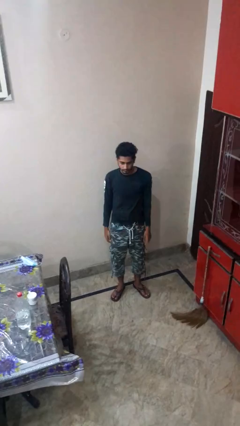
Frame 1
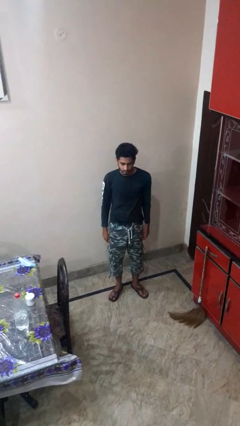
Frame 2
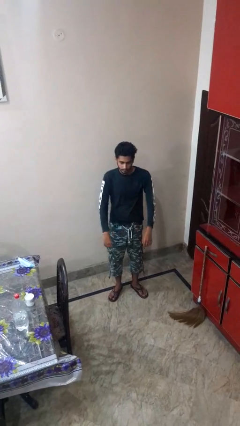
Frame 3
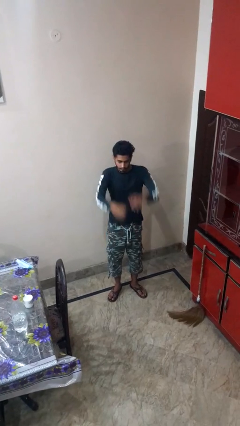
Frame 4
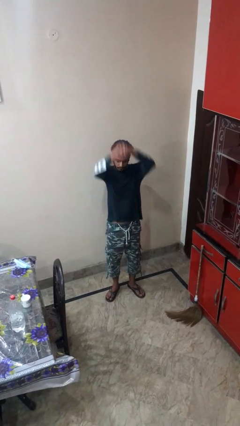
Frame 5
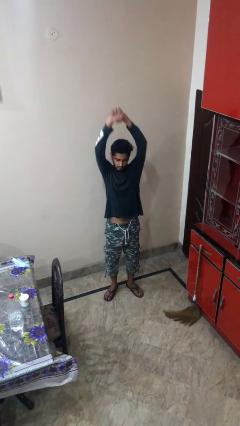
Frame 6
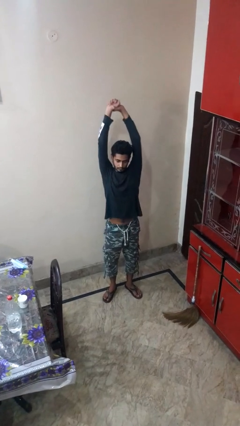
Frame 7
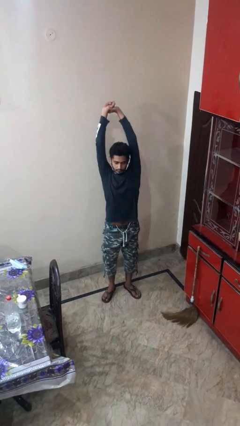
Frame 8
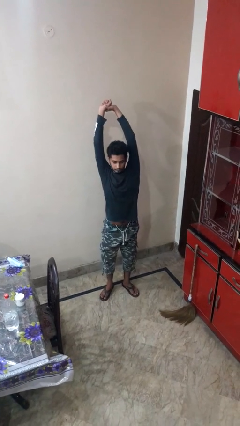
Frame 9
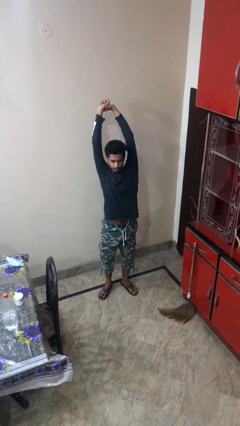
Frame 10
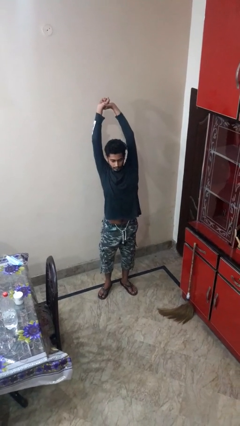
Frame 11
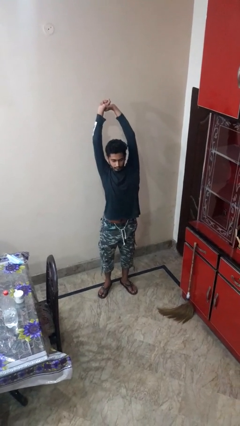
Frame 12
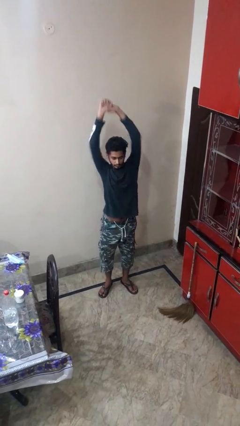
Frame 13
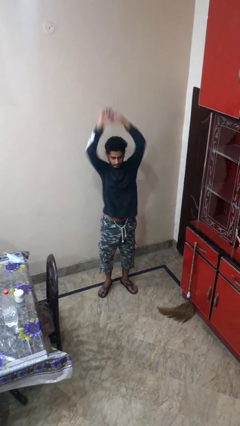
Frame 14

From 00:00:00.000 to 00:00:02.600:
person stretches arms over head

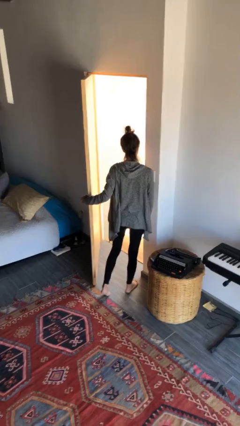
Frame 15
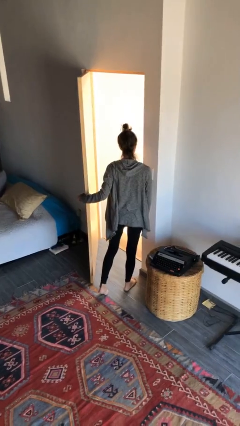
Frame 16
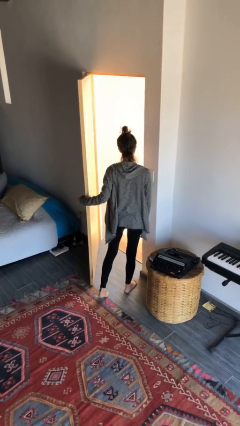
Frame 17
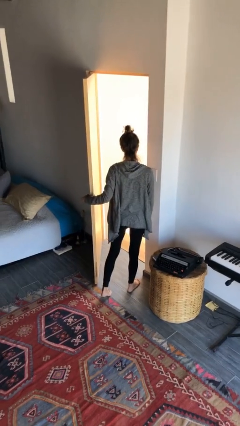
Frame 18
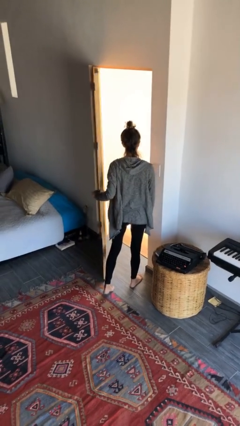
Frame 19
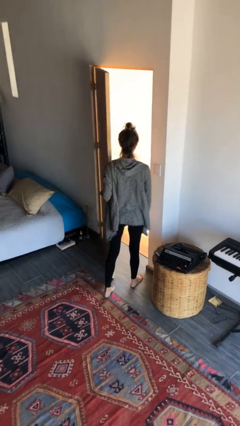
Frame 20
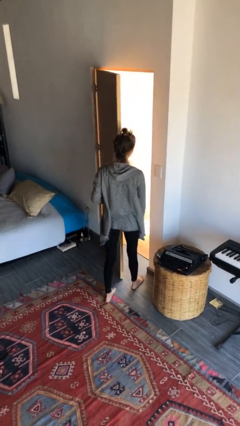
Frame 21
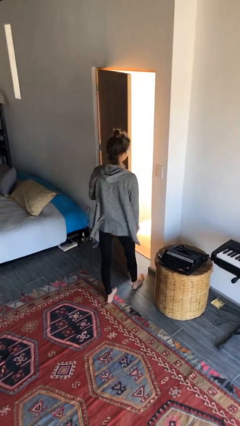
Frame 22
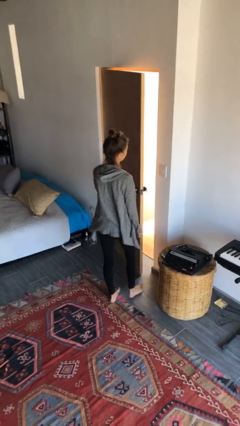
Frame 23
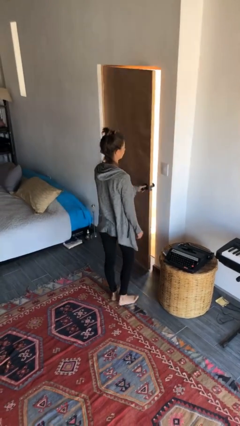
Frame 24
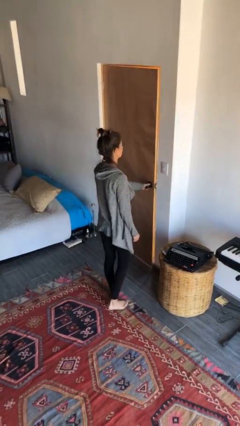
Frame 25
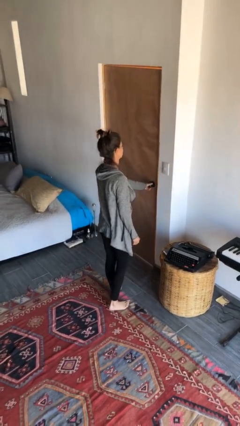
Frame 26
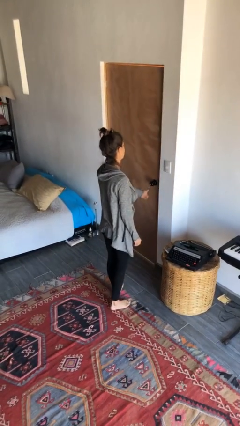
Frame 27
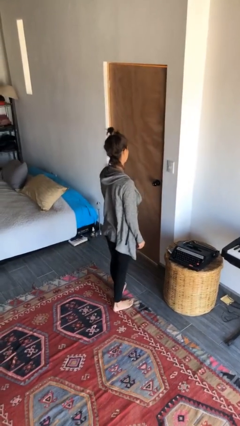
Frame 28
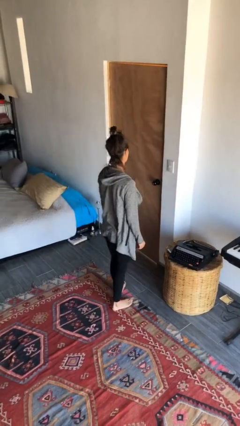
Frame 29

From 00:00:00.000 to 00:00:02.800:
person closes facility door

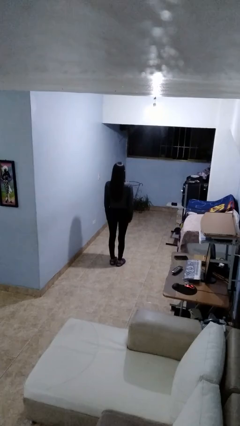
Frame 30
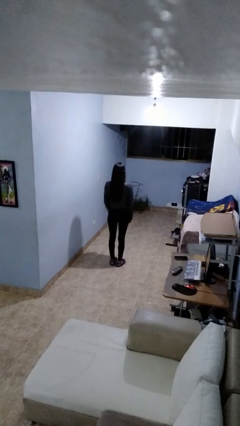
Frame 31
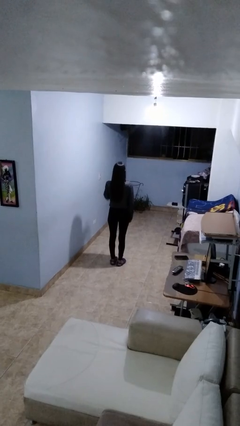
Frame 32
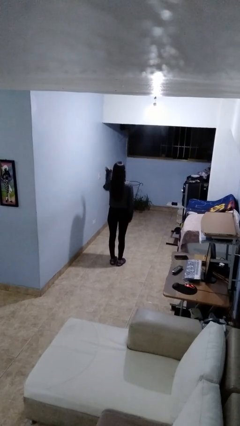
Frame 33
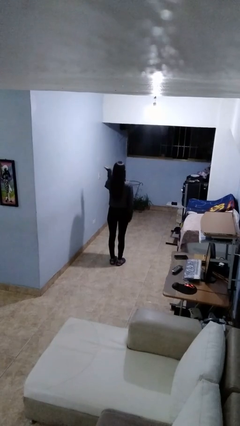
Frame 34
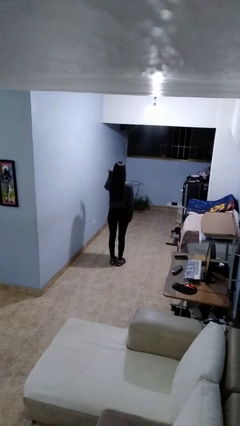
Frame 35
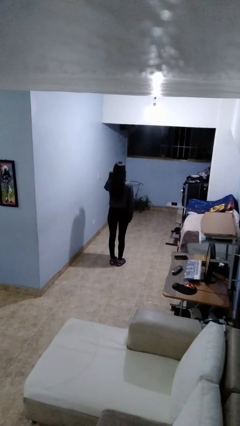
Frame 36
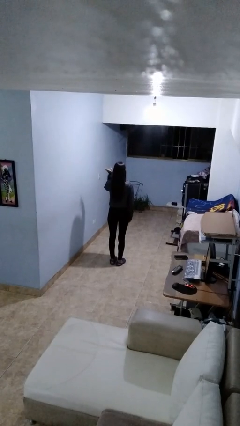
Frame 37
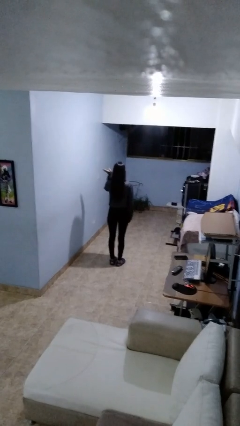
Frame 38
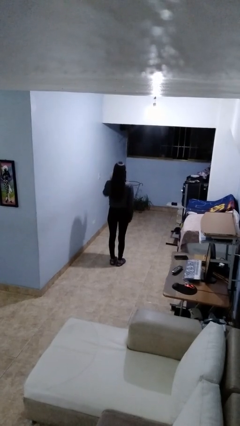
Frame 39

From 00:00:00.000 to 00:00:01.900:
person salutes

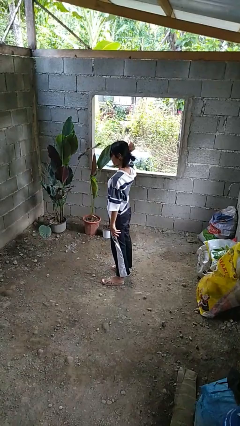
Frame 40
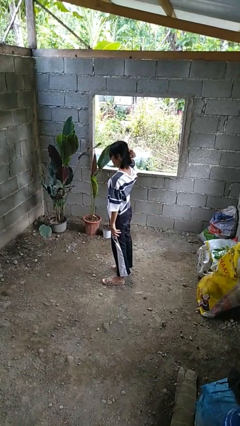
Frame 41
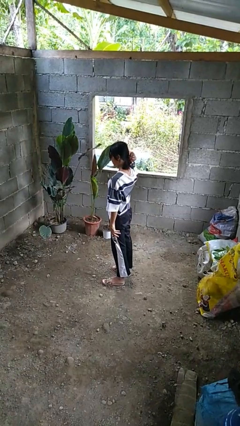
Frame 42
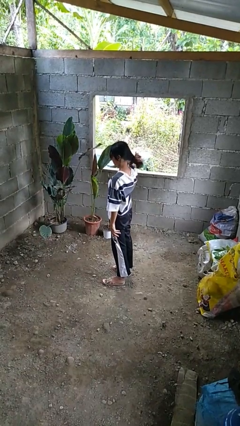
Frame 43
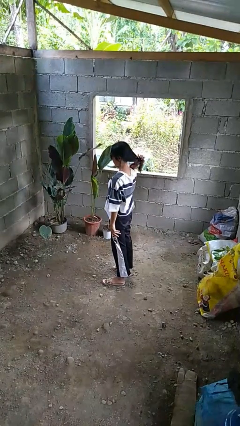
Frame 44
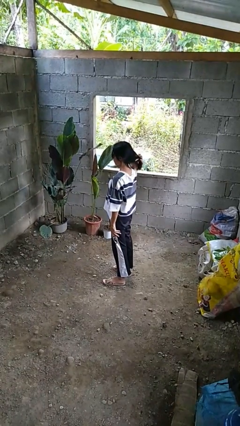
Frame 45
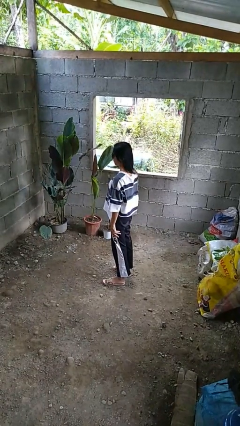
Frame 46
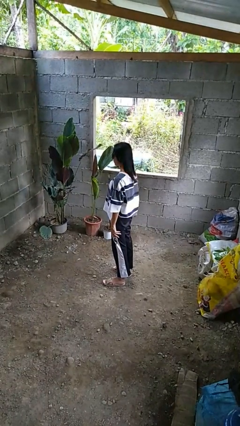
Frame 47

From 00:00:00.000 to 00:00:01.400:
person takes off hairtie

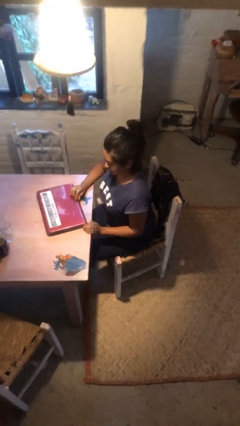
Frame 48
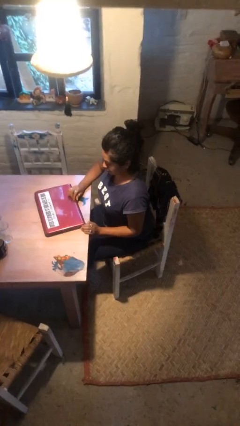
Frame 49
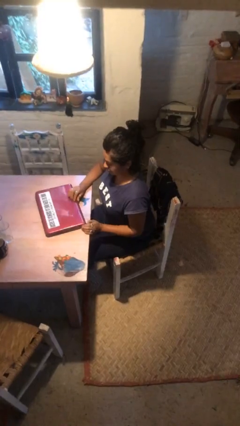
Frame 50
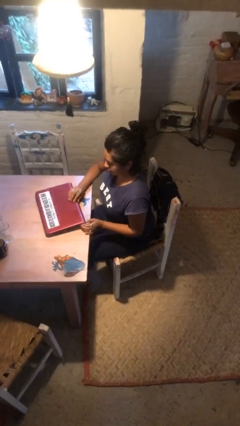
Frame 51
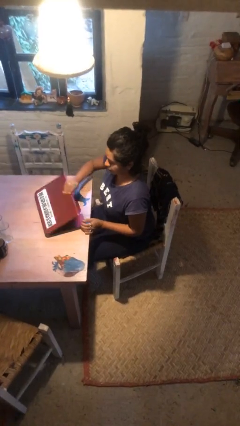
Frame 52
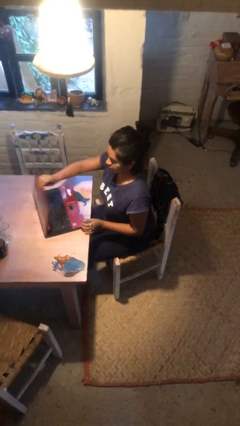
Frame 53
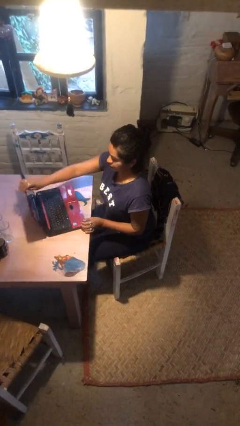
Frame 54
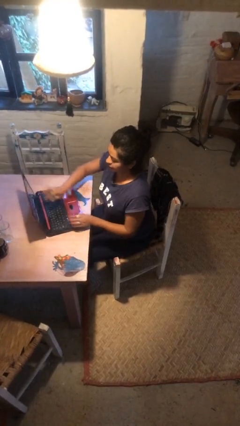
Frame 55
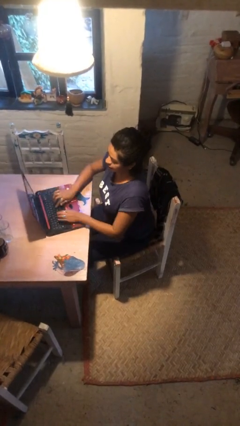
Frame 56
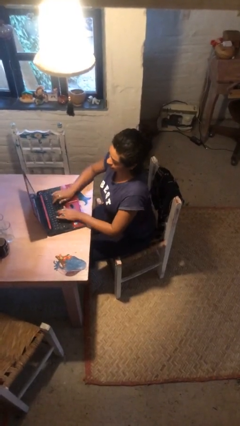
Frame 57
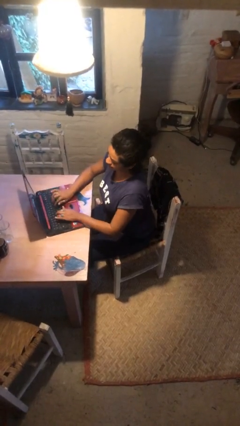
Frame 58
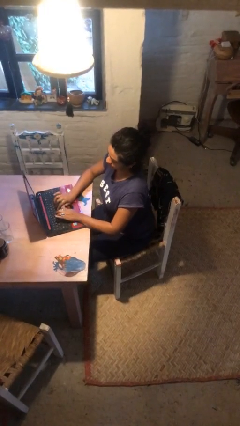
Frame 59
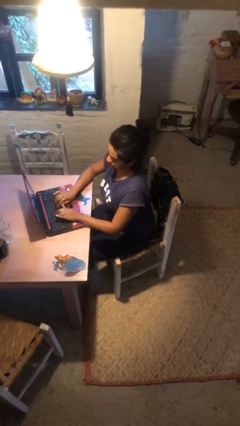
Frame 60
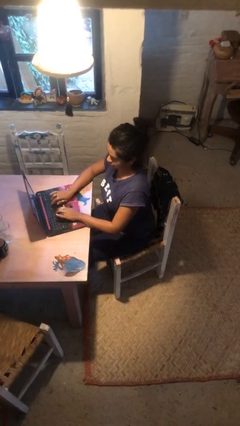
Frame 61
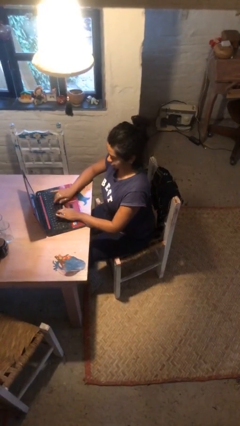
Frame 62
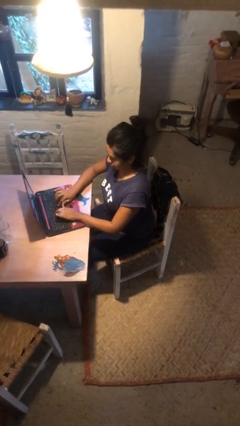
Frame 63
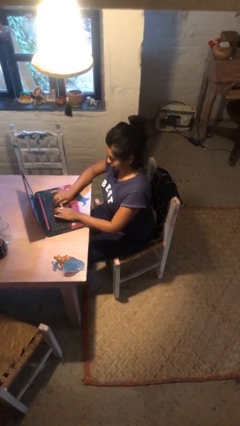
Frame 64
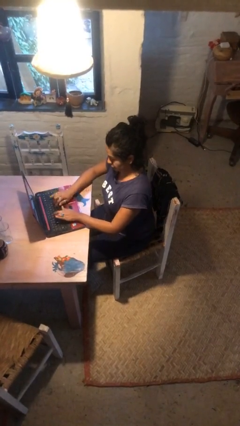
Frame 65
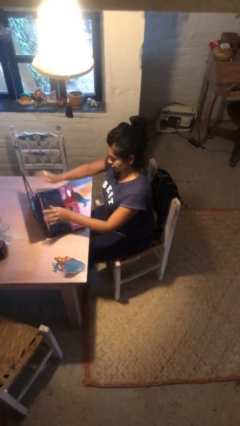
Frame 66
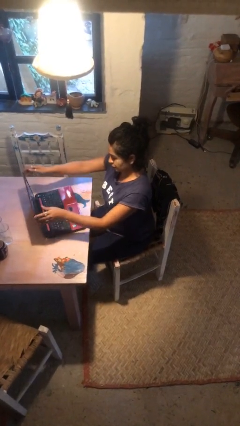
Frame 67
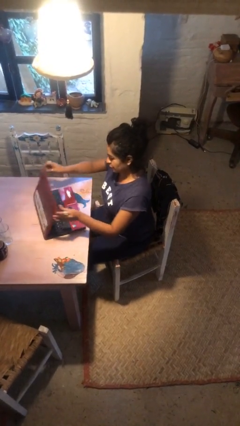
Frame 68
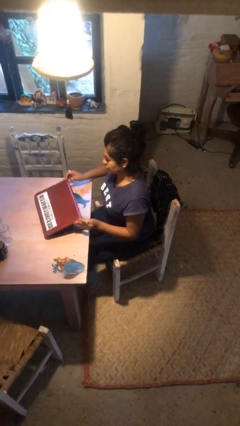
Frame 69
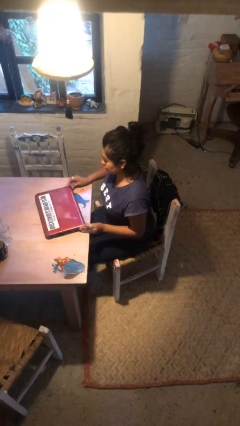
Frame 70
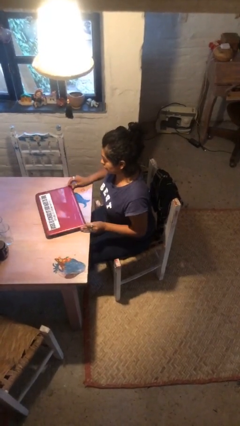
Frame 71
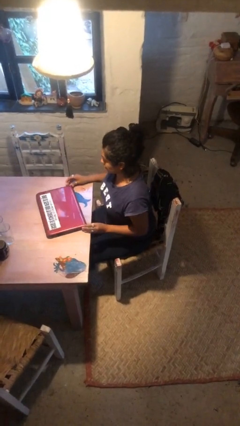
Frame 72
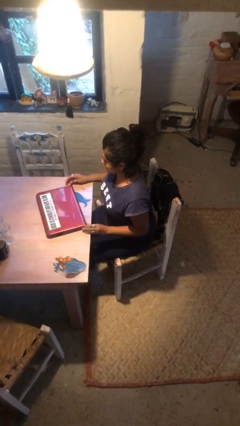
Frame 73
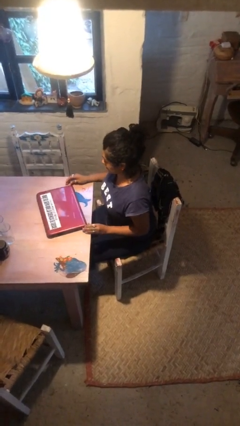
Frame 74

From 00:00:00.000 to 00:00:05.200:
person interacts with laptop

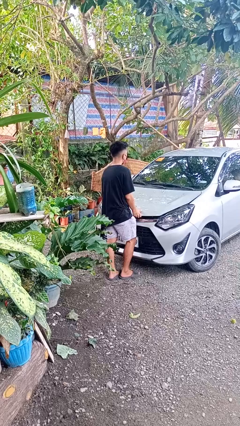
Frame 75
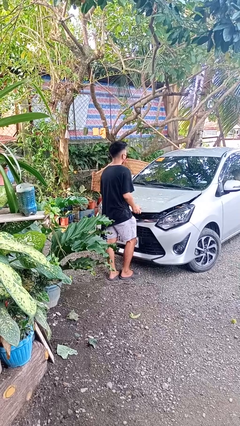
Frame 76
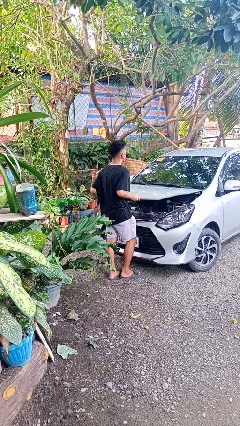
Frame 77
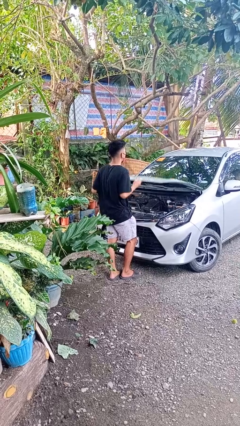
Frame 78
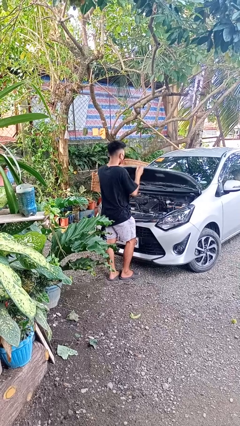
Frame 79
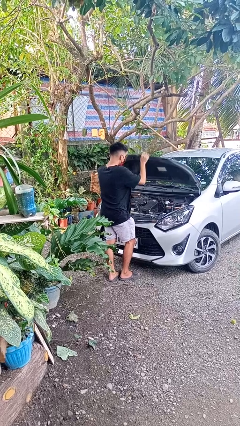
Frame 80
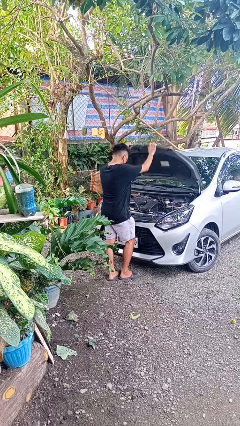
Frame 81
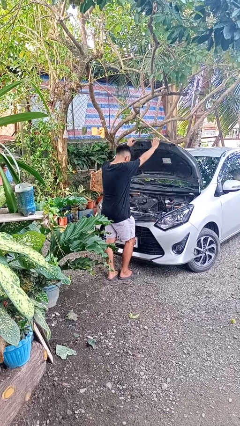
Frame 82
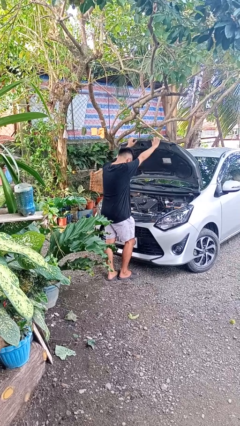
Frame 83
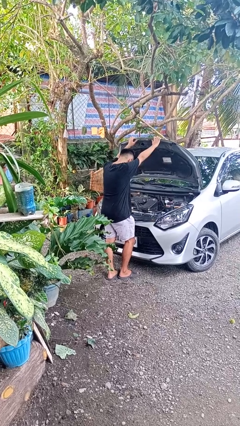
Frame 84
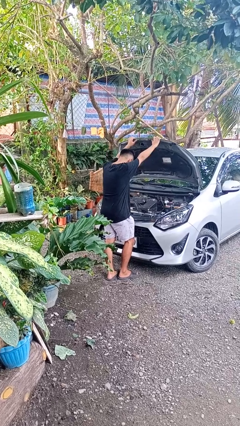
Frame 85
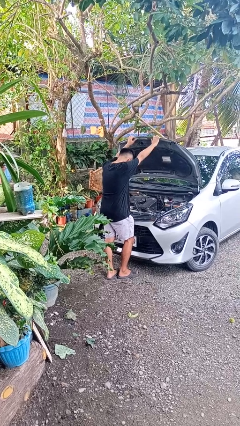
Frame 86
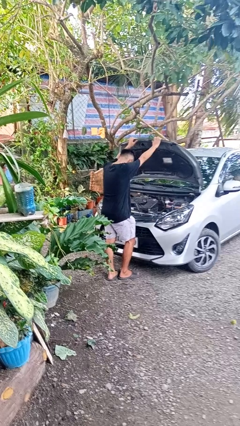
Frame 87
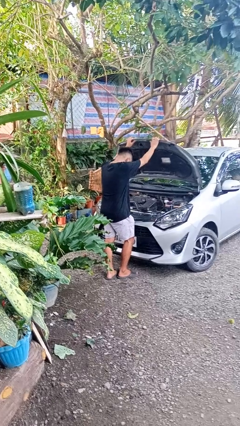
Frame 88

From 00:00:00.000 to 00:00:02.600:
person opens car hood

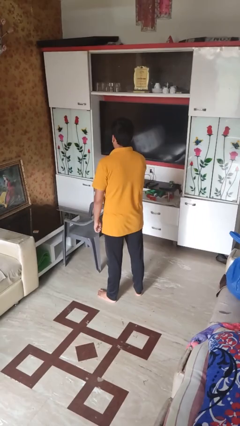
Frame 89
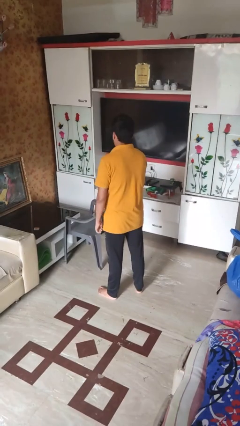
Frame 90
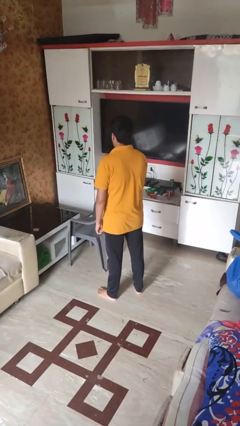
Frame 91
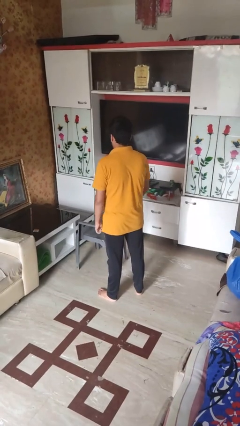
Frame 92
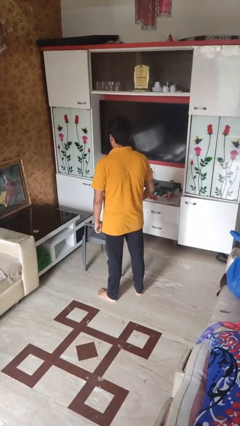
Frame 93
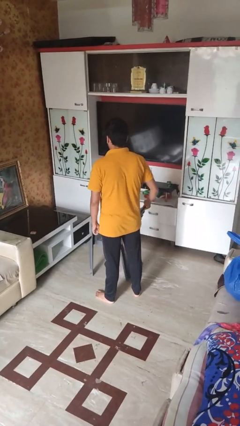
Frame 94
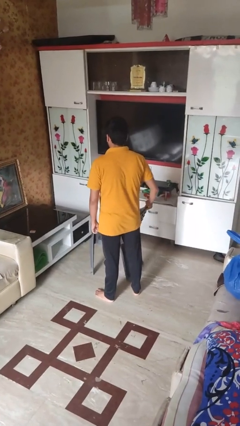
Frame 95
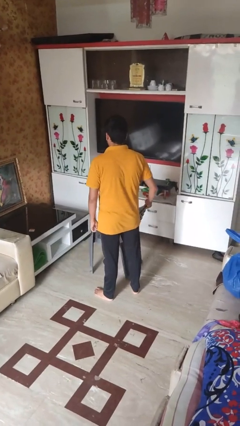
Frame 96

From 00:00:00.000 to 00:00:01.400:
person pulls out chair
